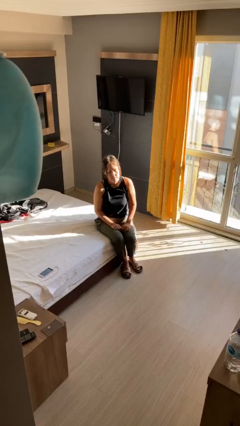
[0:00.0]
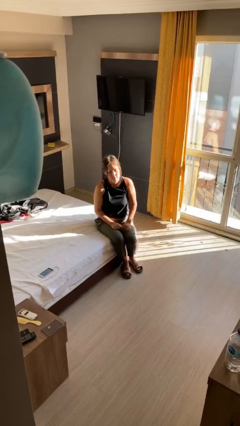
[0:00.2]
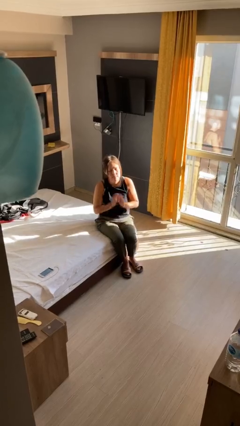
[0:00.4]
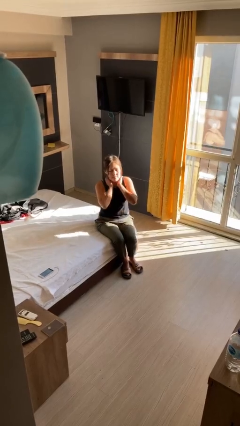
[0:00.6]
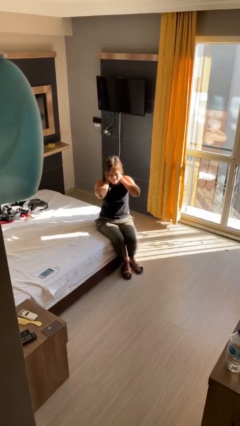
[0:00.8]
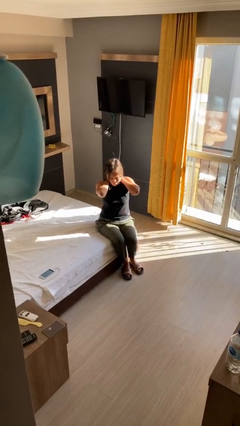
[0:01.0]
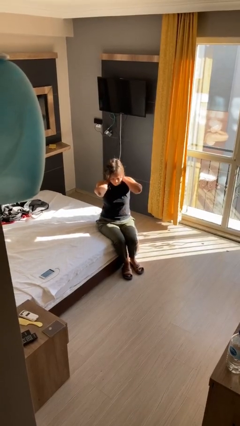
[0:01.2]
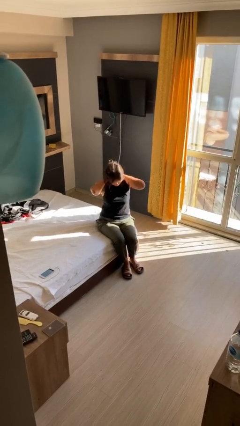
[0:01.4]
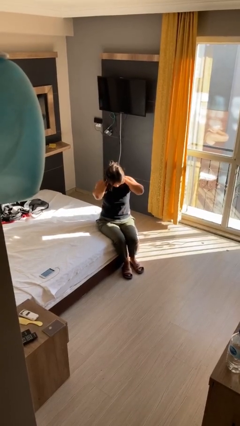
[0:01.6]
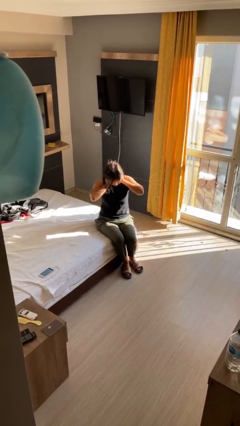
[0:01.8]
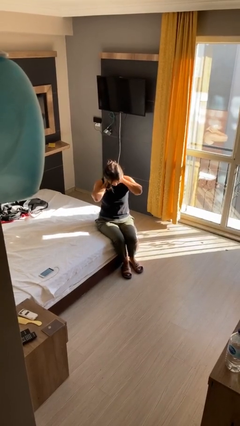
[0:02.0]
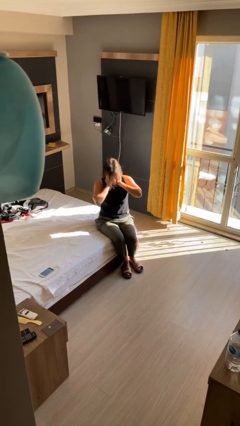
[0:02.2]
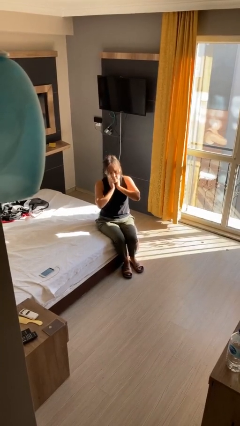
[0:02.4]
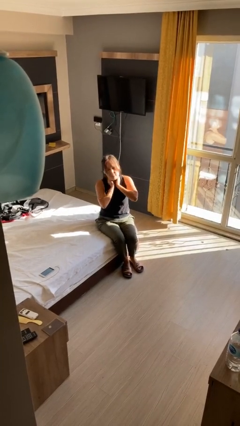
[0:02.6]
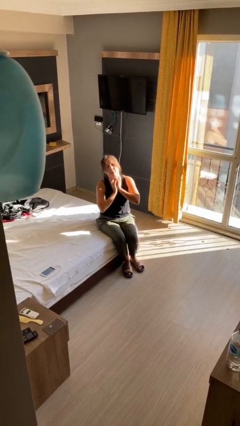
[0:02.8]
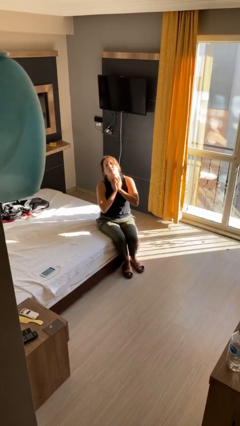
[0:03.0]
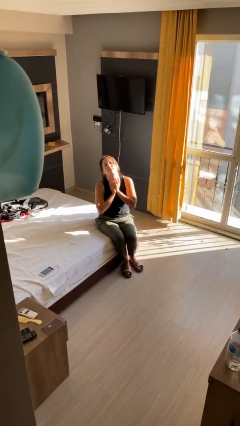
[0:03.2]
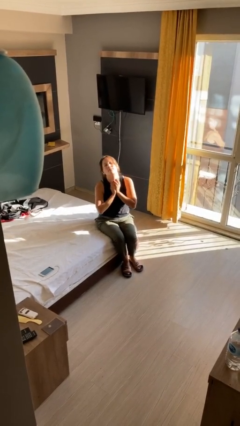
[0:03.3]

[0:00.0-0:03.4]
person rubs neck

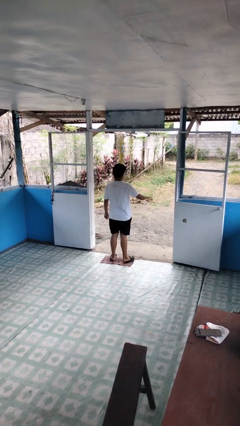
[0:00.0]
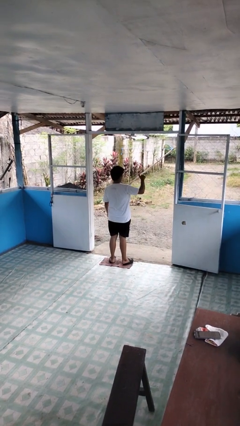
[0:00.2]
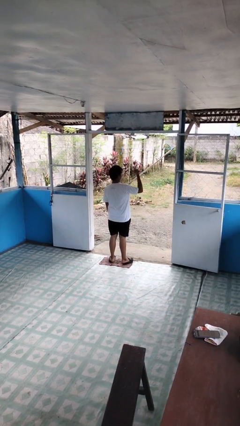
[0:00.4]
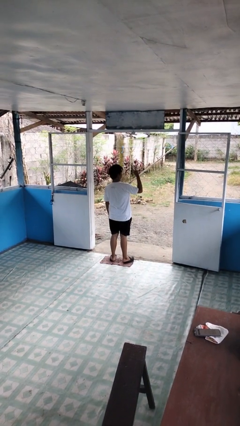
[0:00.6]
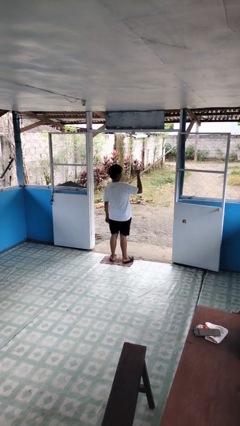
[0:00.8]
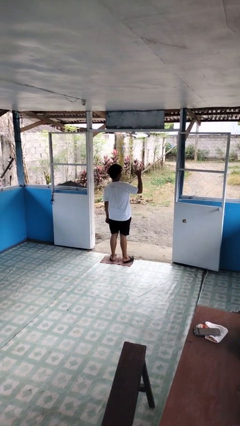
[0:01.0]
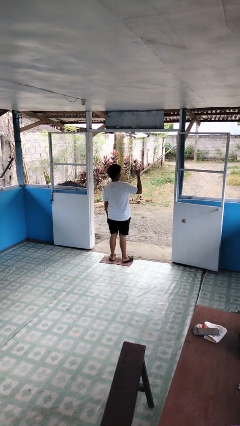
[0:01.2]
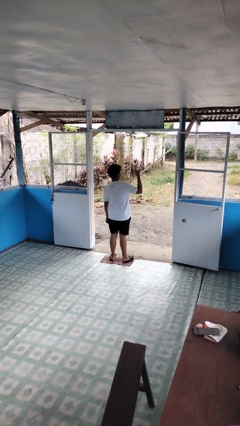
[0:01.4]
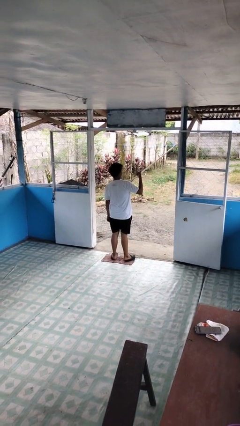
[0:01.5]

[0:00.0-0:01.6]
person gestures hang loose

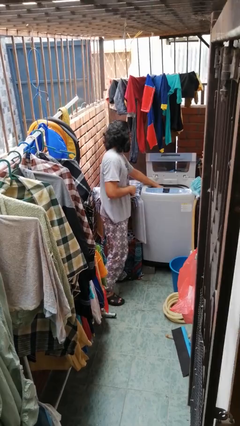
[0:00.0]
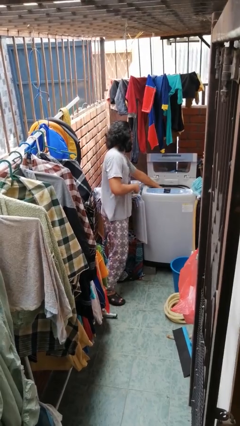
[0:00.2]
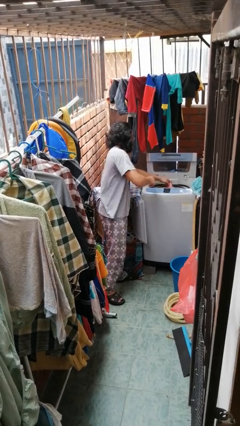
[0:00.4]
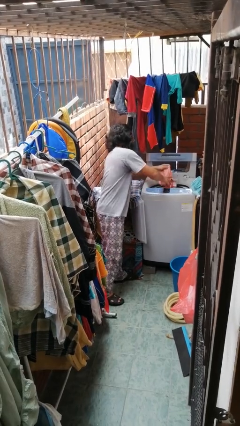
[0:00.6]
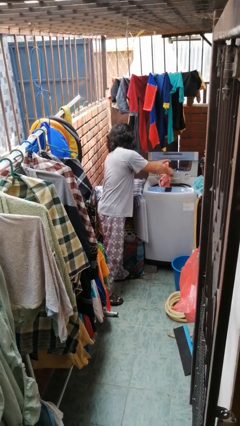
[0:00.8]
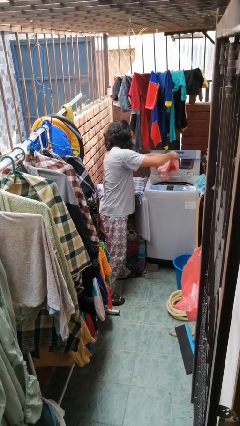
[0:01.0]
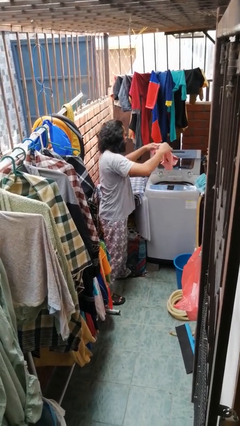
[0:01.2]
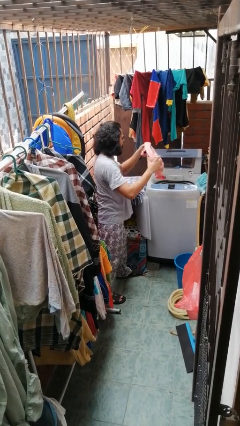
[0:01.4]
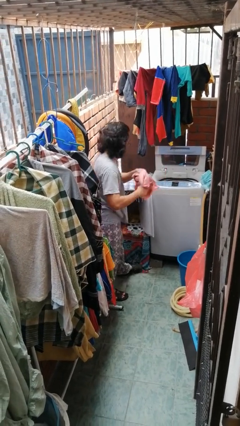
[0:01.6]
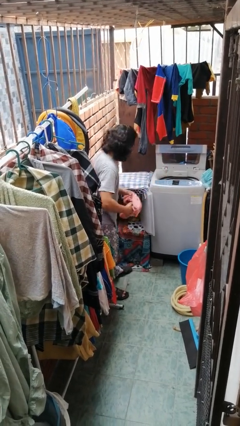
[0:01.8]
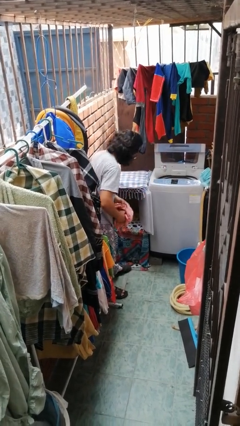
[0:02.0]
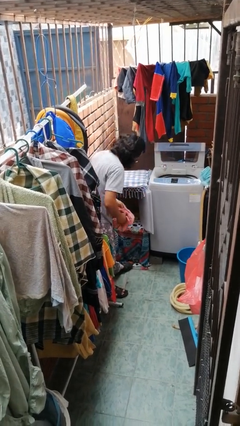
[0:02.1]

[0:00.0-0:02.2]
person unloads clotheswasher

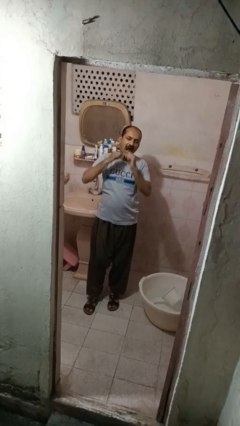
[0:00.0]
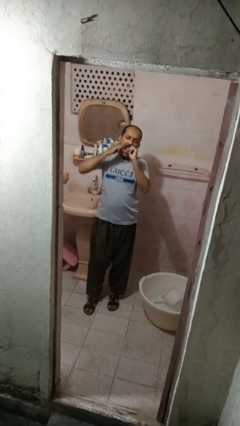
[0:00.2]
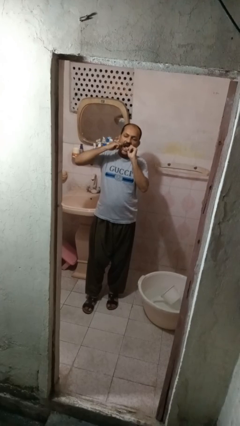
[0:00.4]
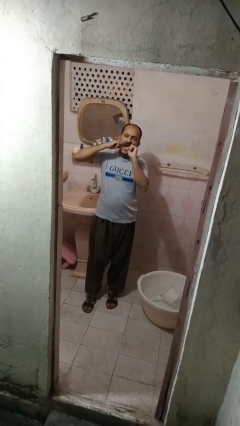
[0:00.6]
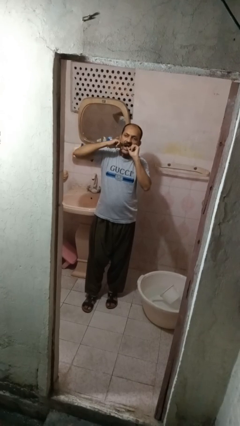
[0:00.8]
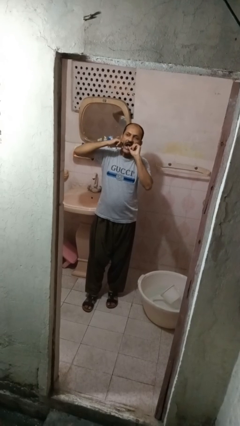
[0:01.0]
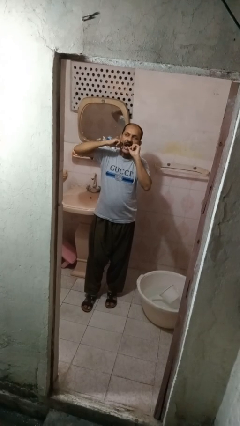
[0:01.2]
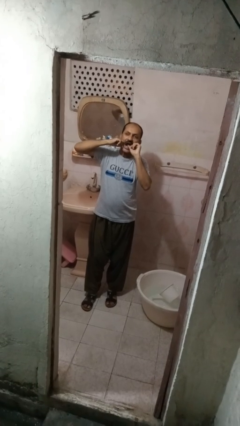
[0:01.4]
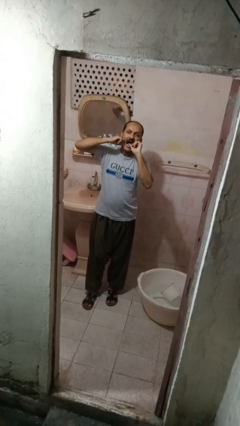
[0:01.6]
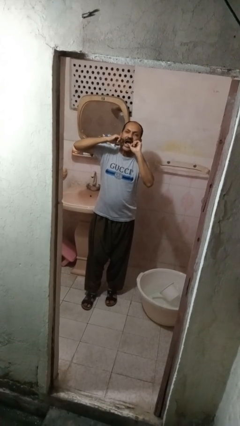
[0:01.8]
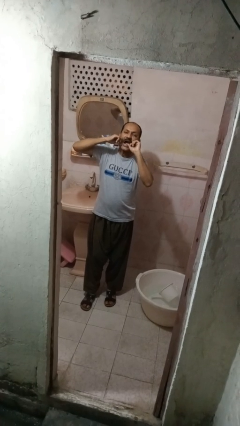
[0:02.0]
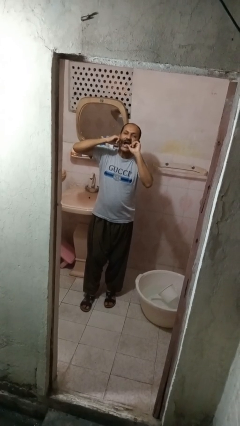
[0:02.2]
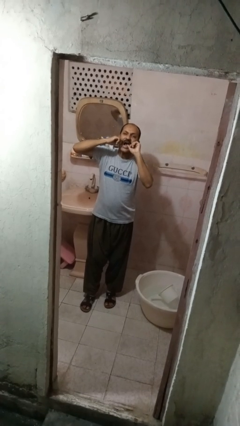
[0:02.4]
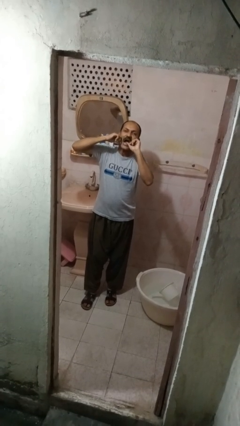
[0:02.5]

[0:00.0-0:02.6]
person flosses

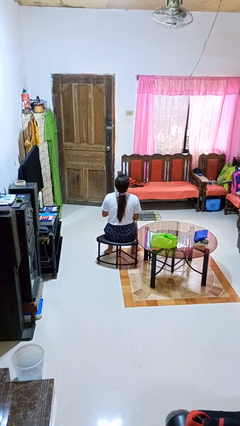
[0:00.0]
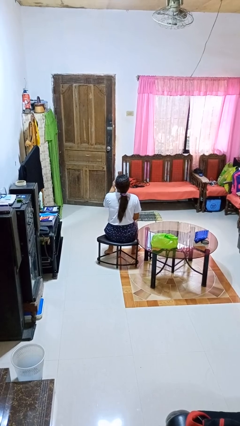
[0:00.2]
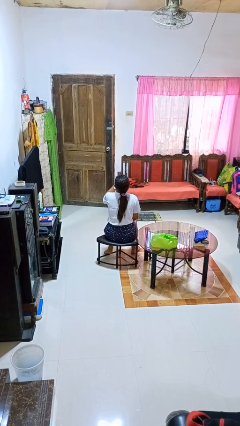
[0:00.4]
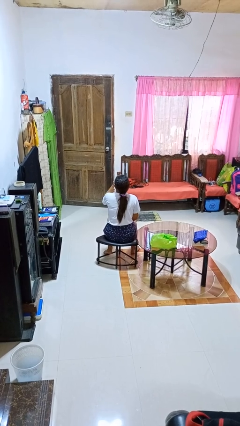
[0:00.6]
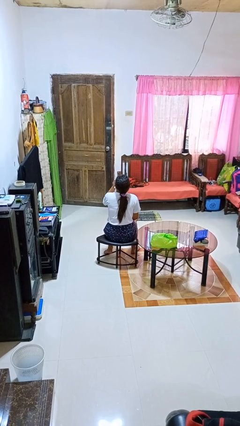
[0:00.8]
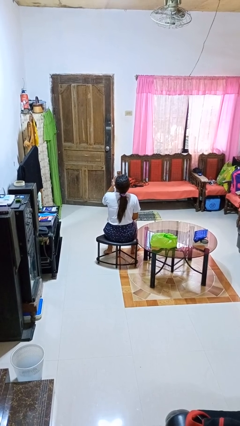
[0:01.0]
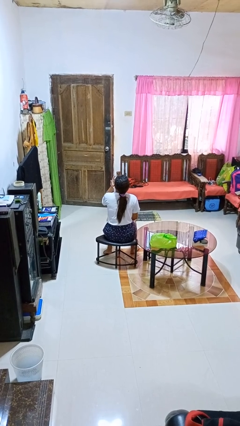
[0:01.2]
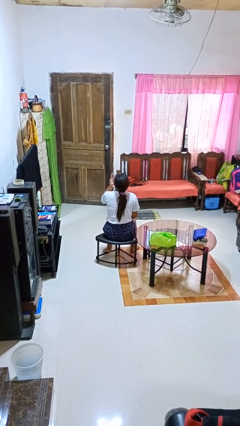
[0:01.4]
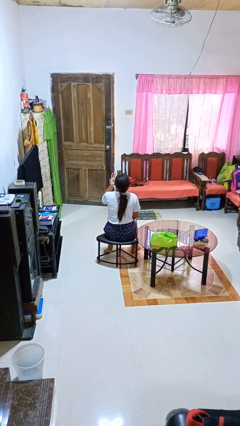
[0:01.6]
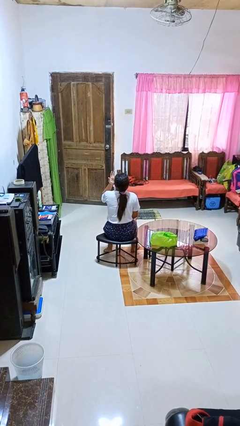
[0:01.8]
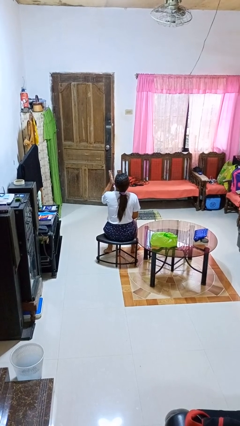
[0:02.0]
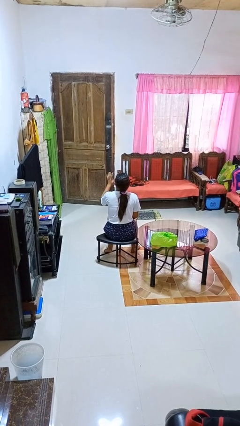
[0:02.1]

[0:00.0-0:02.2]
person licks fingers

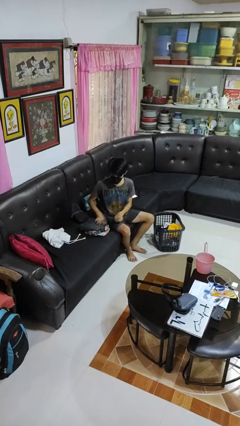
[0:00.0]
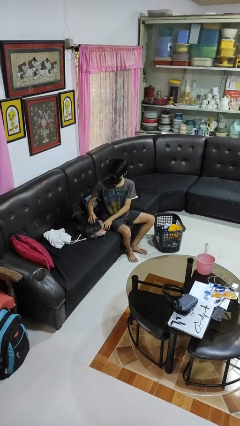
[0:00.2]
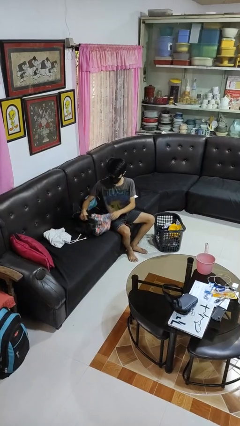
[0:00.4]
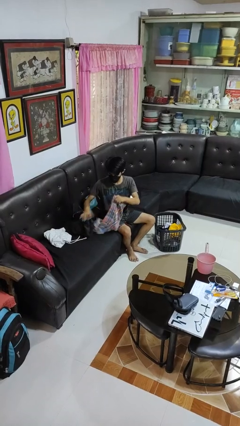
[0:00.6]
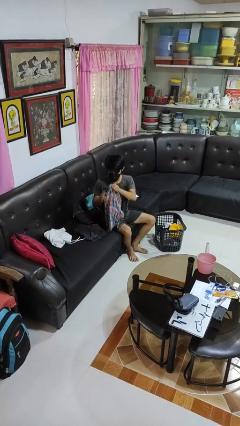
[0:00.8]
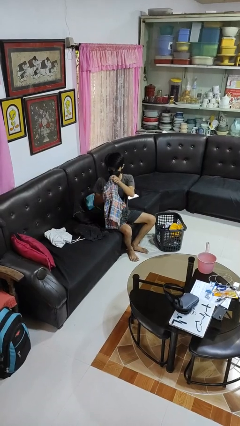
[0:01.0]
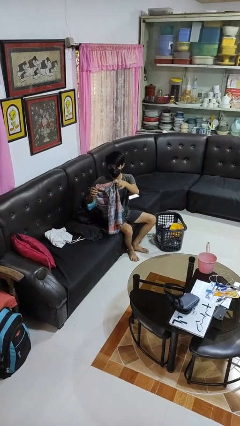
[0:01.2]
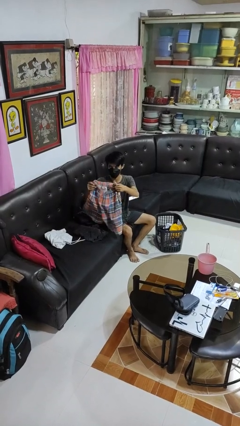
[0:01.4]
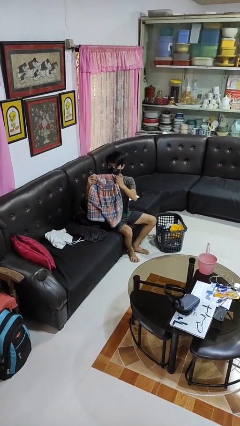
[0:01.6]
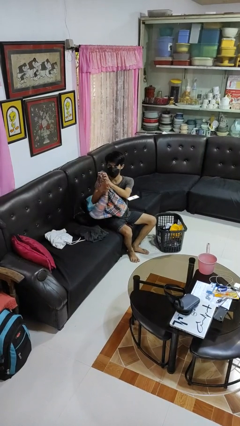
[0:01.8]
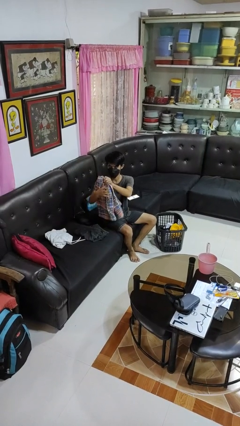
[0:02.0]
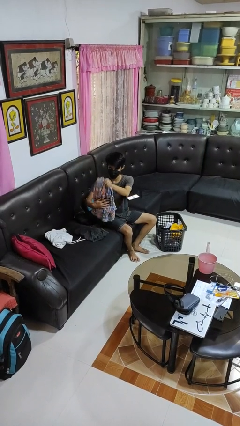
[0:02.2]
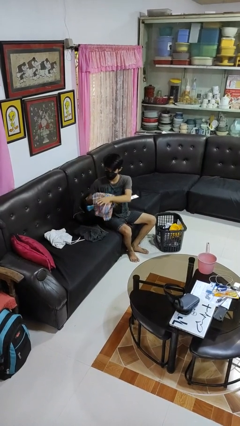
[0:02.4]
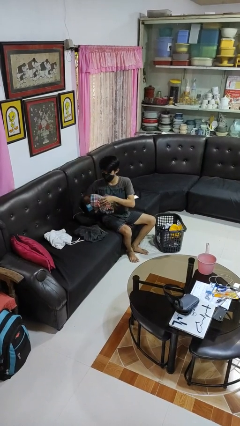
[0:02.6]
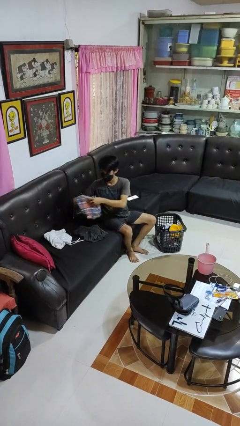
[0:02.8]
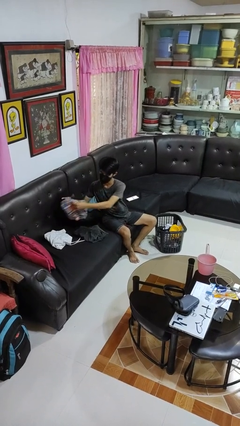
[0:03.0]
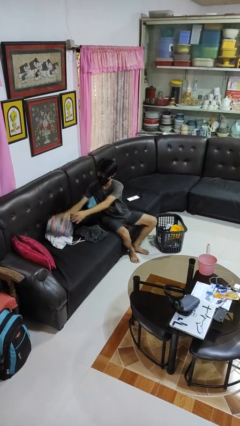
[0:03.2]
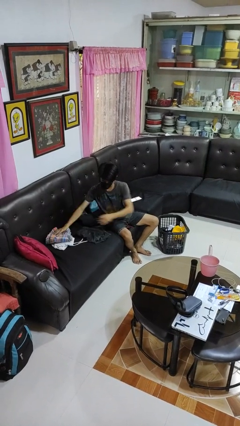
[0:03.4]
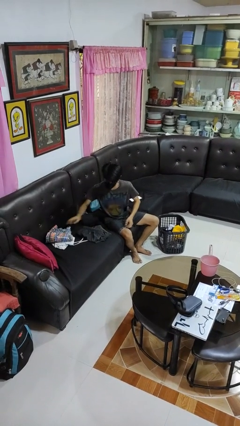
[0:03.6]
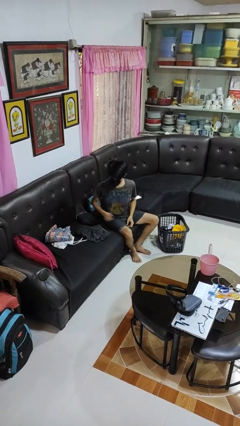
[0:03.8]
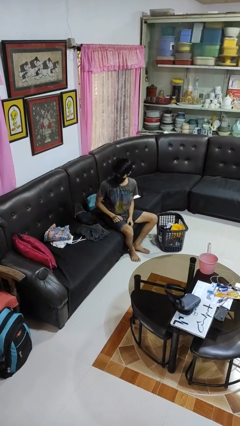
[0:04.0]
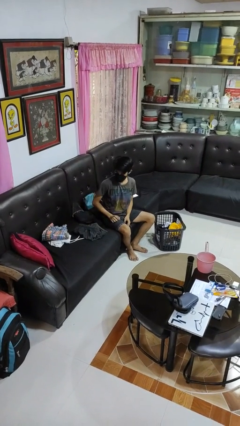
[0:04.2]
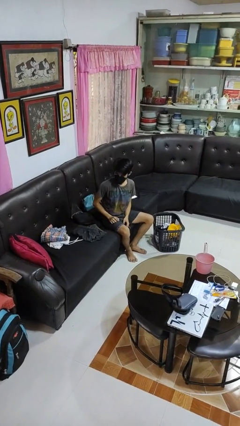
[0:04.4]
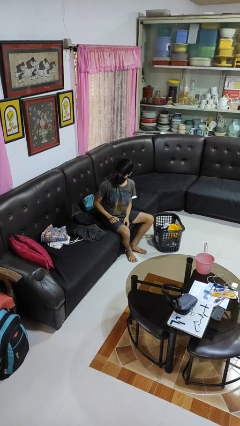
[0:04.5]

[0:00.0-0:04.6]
person folds pants

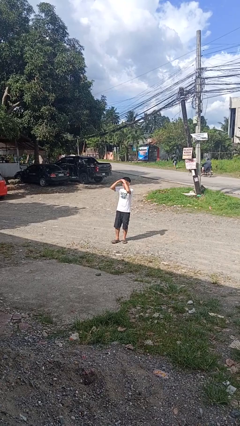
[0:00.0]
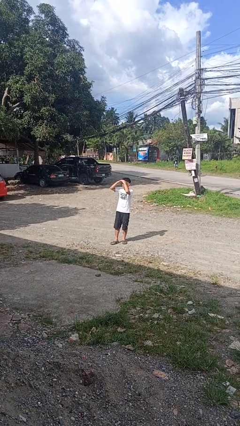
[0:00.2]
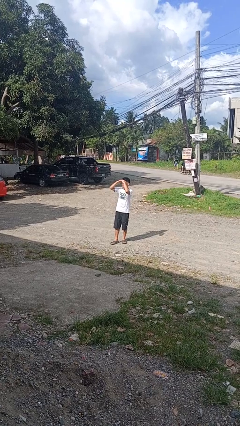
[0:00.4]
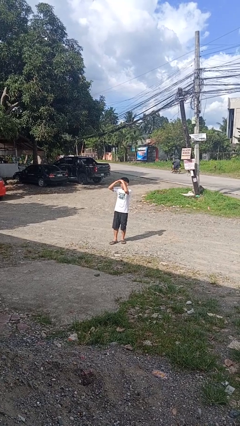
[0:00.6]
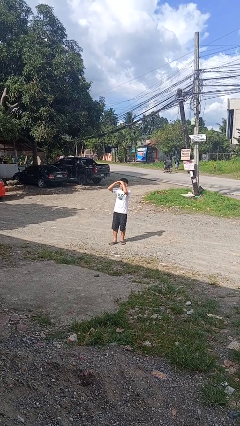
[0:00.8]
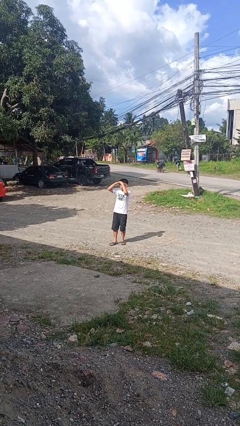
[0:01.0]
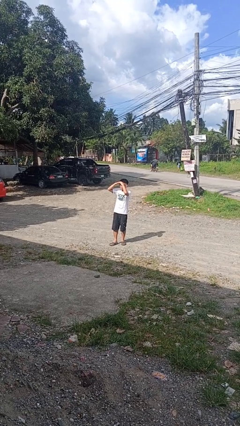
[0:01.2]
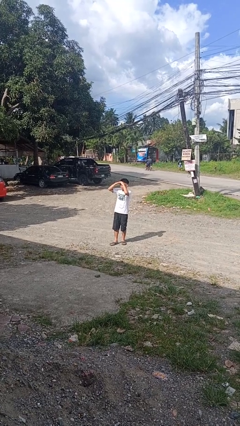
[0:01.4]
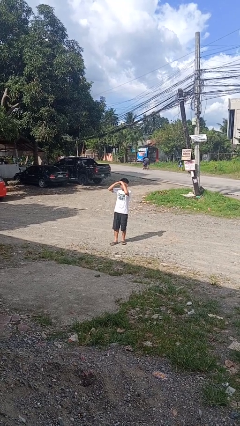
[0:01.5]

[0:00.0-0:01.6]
person shades eyes
